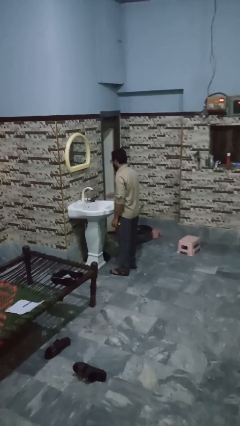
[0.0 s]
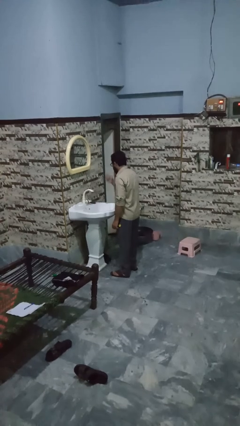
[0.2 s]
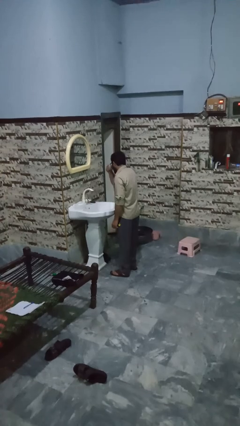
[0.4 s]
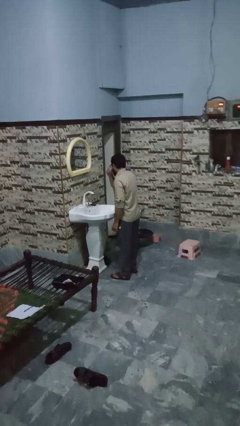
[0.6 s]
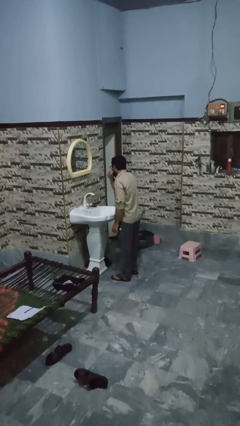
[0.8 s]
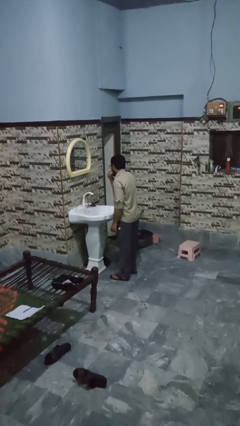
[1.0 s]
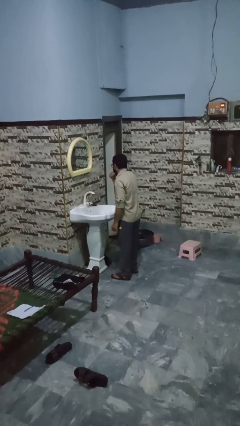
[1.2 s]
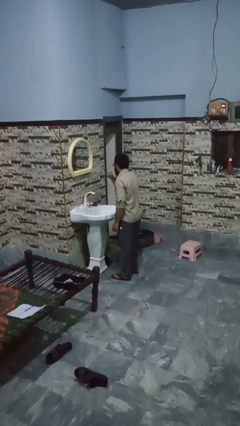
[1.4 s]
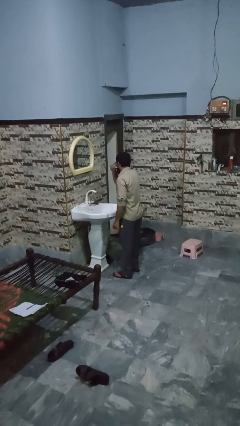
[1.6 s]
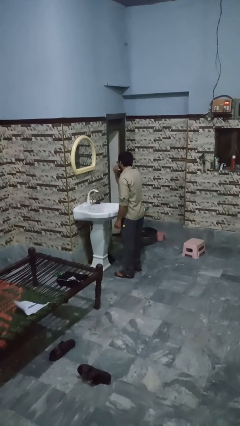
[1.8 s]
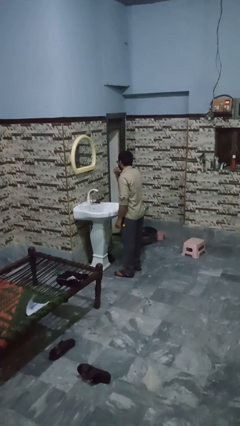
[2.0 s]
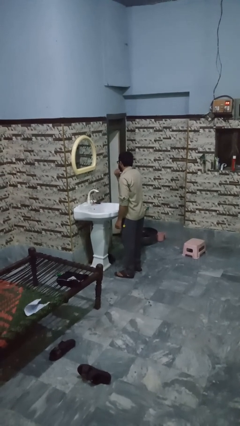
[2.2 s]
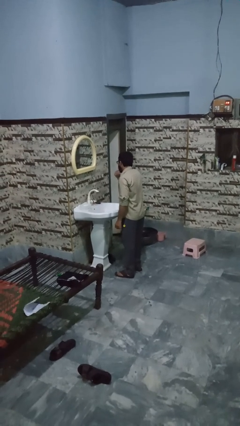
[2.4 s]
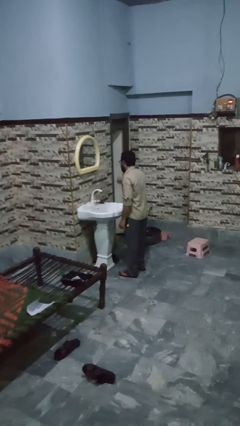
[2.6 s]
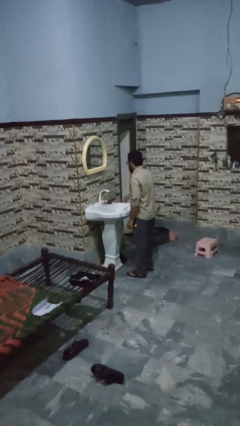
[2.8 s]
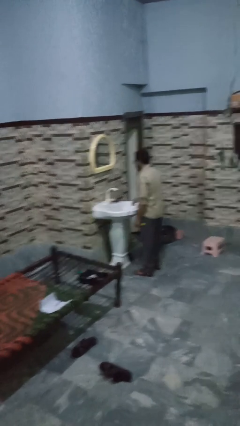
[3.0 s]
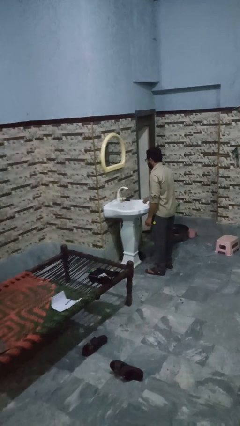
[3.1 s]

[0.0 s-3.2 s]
person shaves face

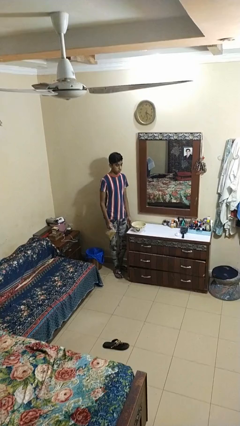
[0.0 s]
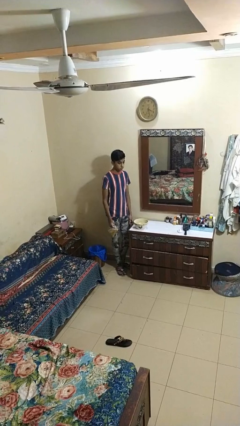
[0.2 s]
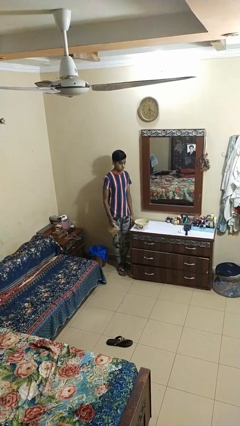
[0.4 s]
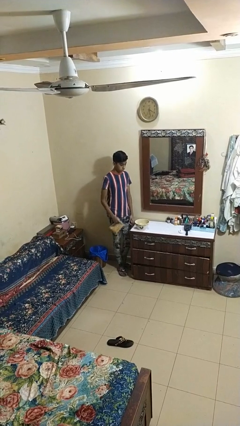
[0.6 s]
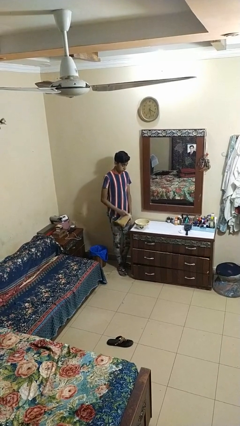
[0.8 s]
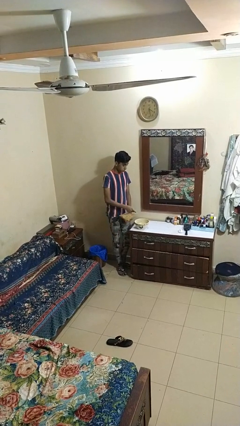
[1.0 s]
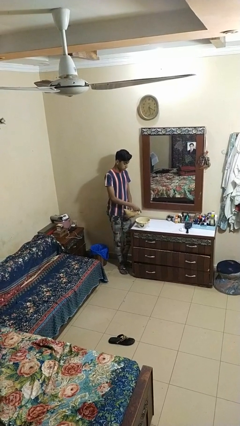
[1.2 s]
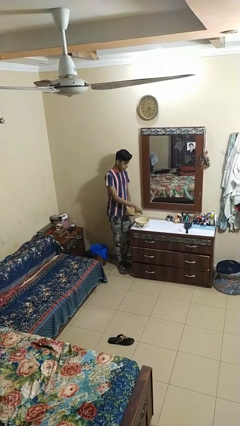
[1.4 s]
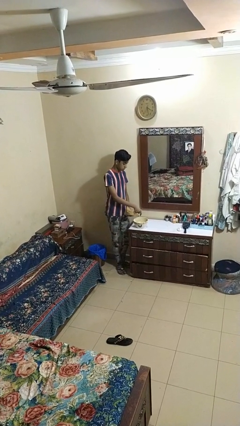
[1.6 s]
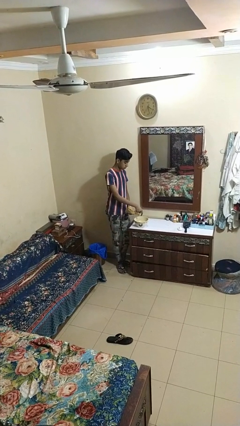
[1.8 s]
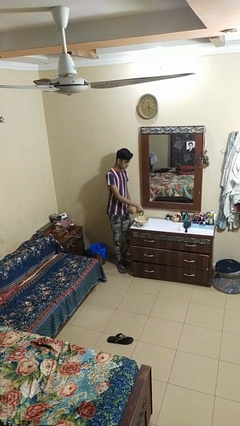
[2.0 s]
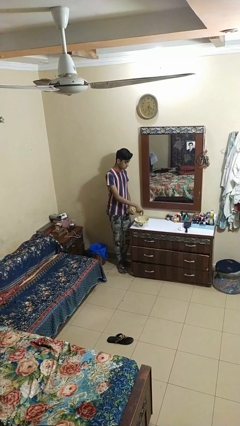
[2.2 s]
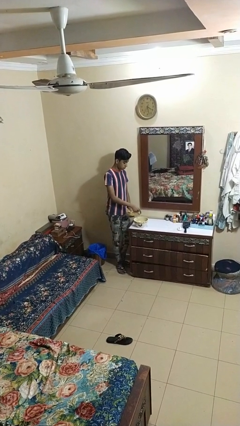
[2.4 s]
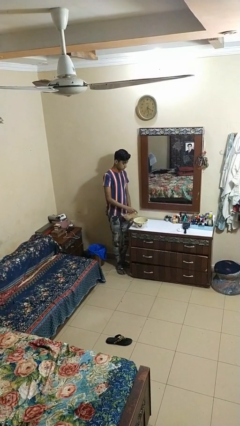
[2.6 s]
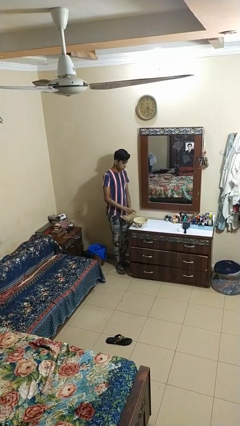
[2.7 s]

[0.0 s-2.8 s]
person pours into bowl

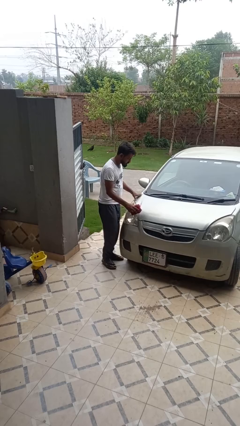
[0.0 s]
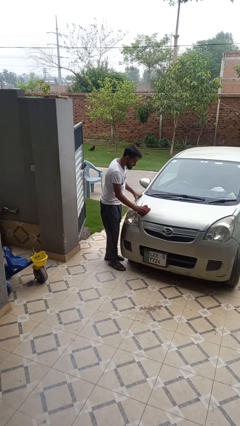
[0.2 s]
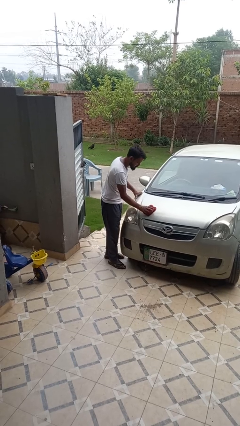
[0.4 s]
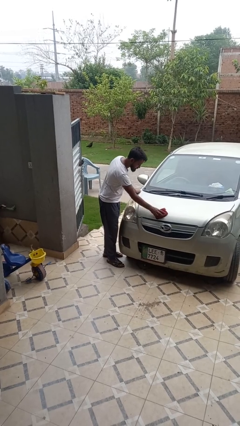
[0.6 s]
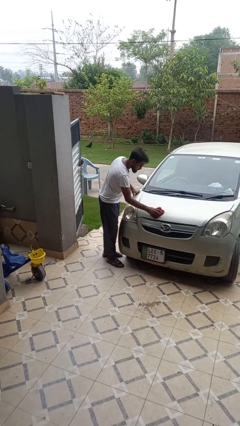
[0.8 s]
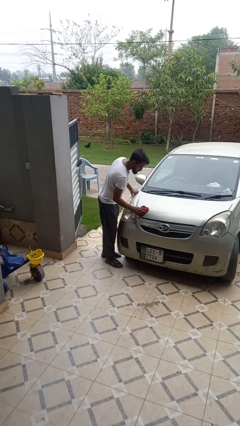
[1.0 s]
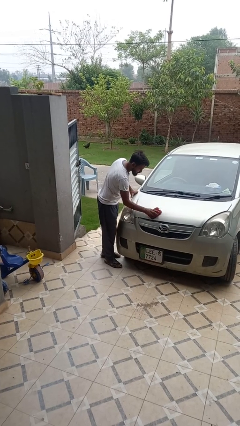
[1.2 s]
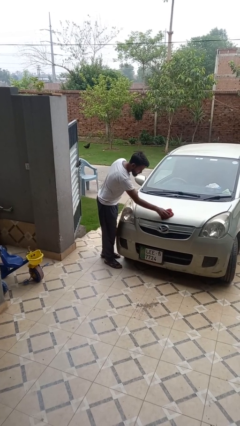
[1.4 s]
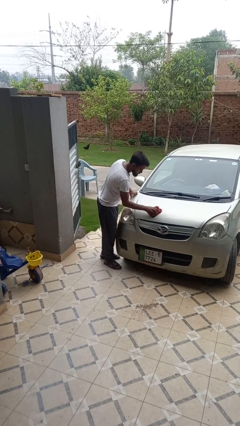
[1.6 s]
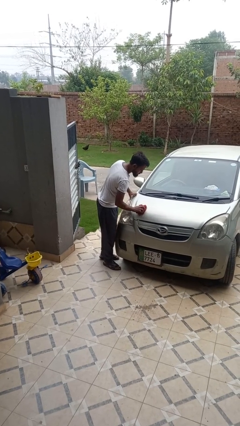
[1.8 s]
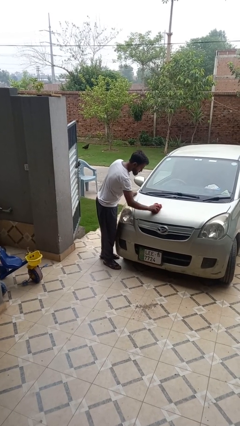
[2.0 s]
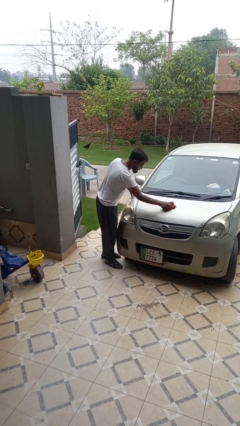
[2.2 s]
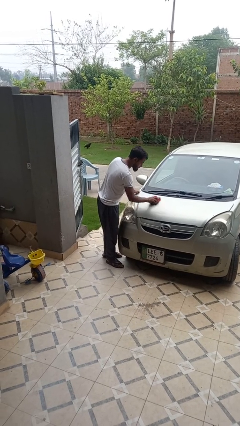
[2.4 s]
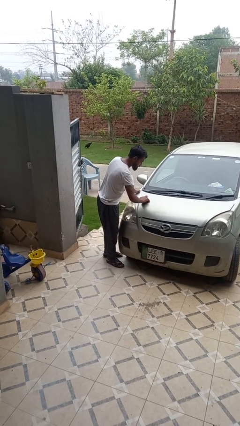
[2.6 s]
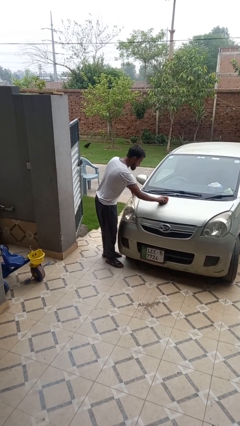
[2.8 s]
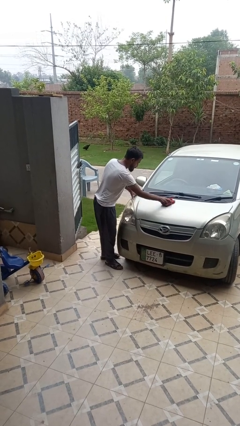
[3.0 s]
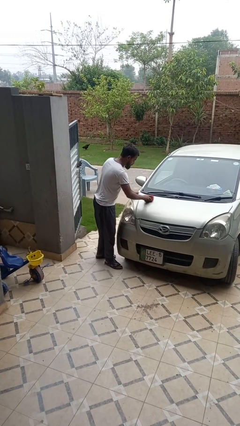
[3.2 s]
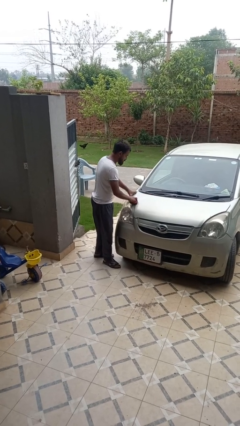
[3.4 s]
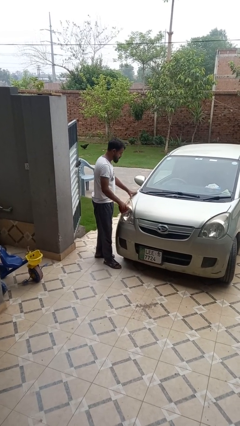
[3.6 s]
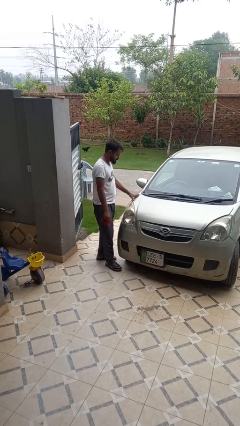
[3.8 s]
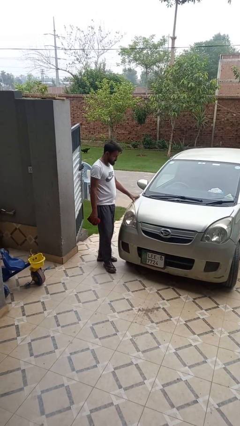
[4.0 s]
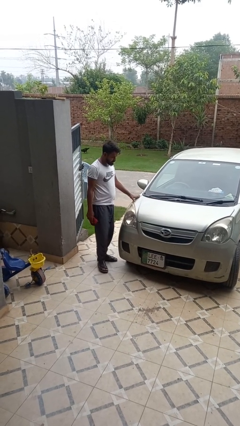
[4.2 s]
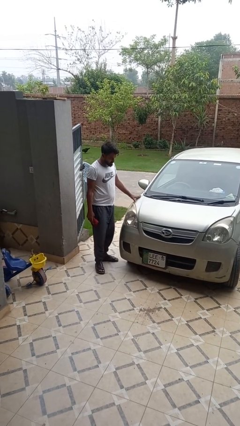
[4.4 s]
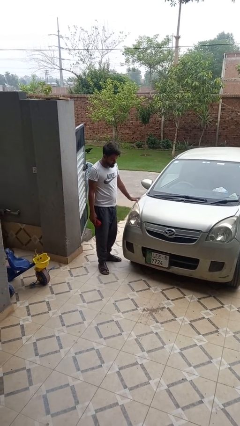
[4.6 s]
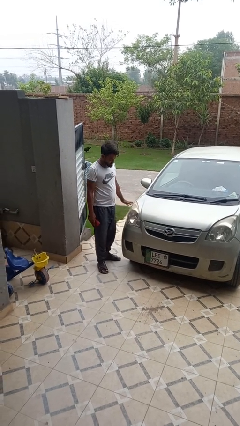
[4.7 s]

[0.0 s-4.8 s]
person polishes car with rag

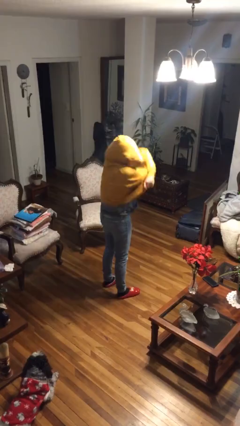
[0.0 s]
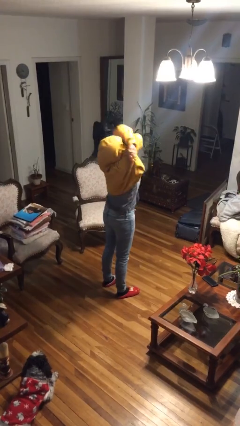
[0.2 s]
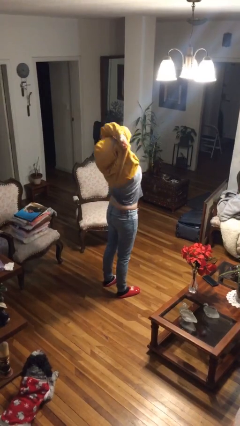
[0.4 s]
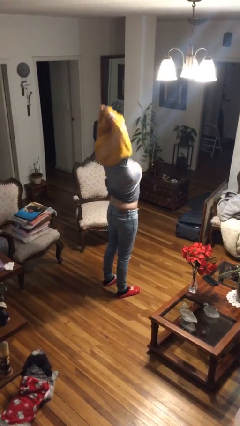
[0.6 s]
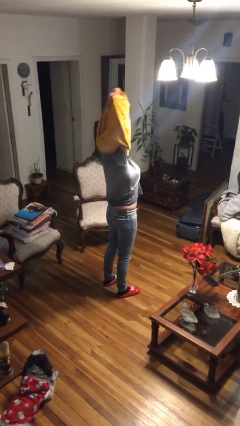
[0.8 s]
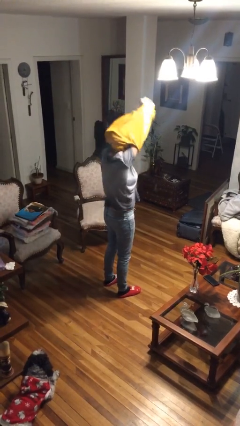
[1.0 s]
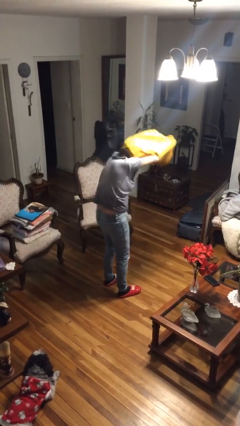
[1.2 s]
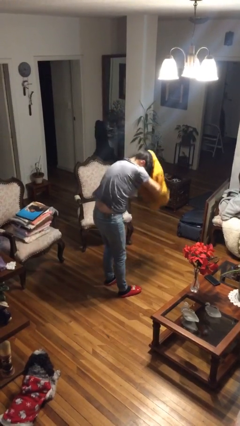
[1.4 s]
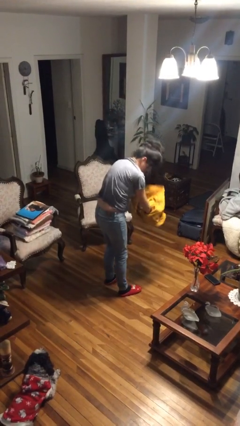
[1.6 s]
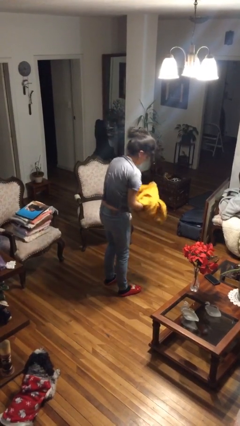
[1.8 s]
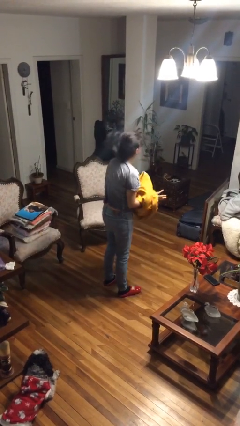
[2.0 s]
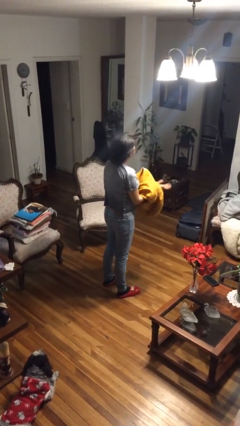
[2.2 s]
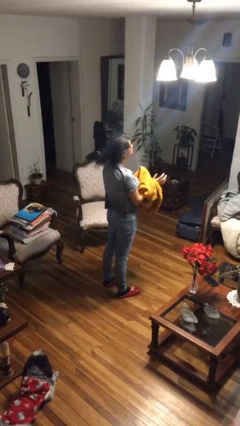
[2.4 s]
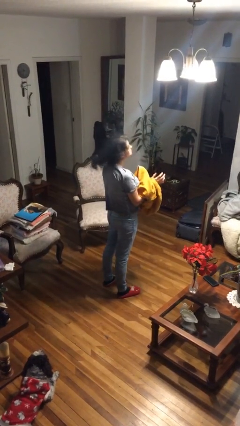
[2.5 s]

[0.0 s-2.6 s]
person takes off hoodie

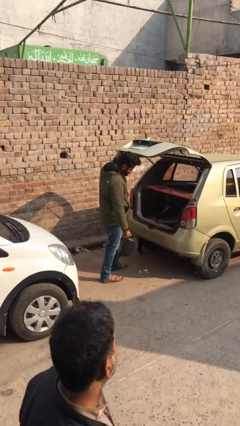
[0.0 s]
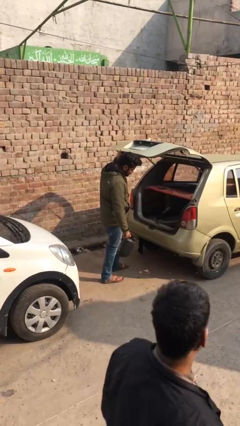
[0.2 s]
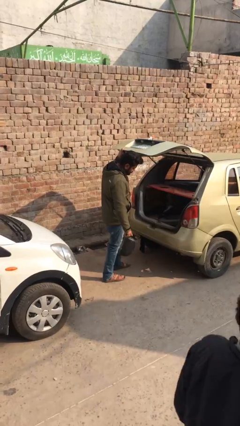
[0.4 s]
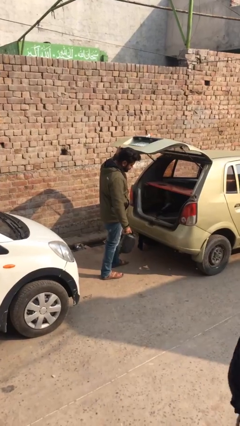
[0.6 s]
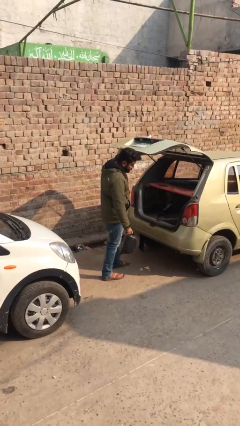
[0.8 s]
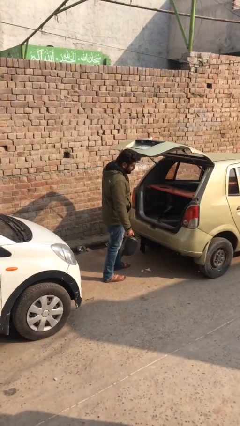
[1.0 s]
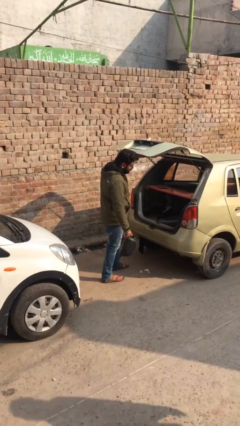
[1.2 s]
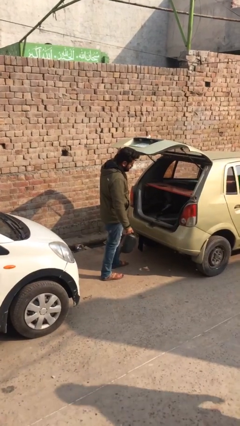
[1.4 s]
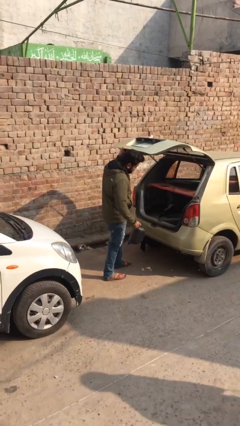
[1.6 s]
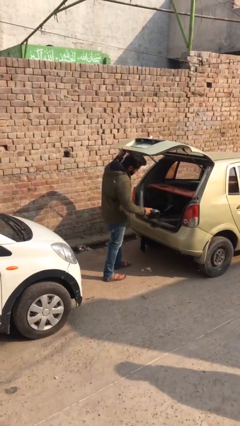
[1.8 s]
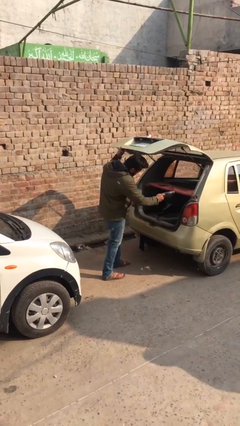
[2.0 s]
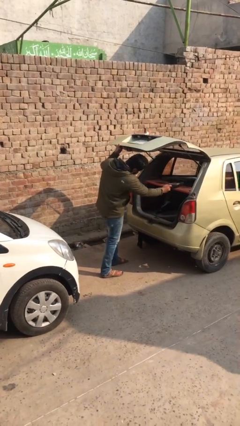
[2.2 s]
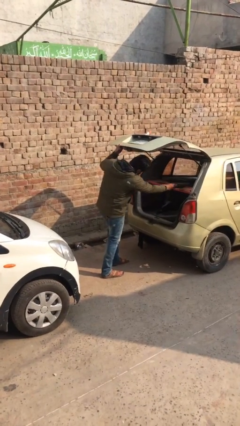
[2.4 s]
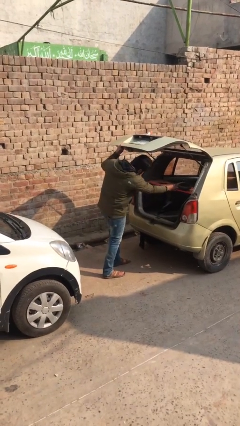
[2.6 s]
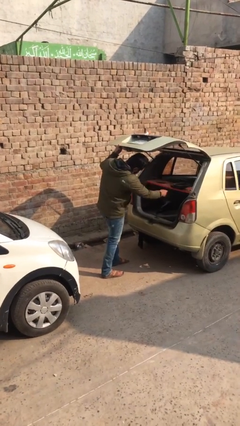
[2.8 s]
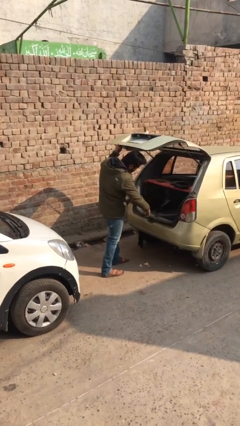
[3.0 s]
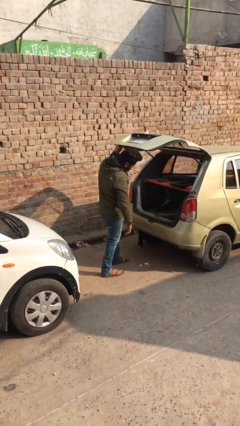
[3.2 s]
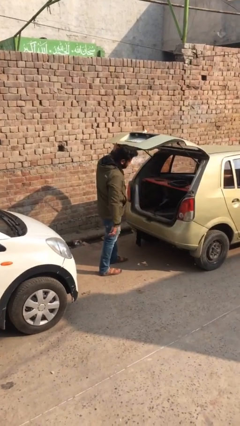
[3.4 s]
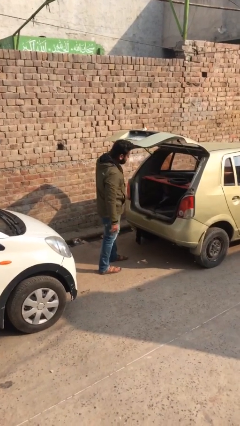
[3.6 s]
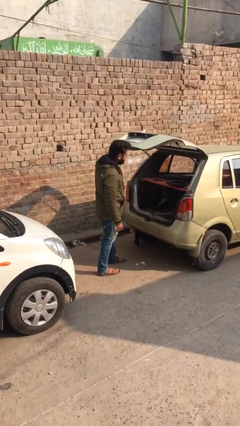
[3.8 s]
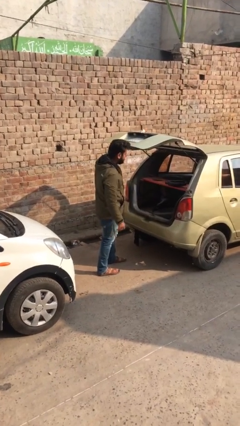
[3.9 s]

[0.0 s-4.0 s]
person loads car

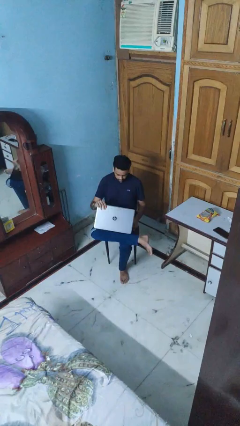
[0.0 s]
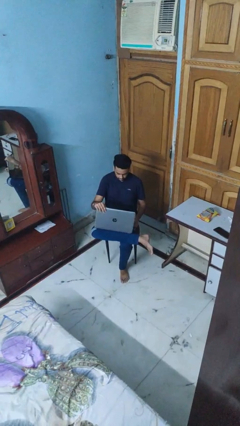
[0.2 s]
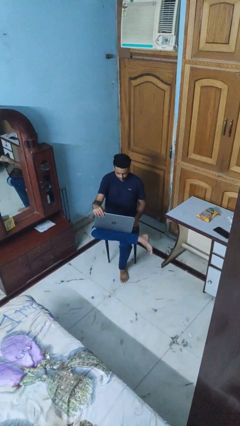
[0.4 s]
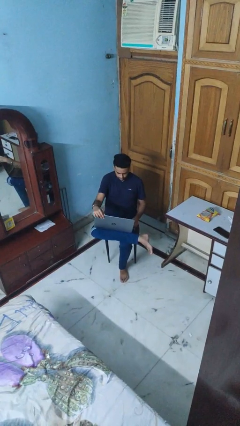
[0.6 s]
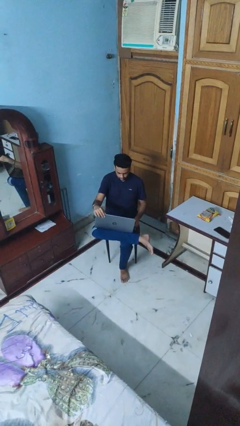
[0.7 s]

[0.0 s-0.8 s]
person opens laptop
